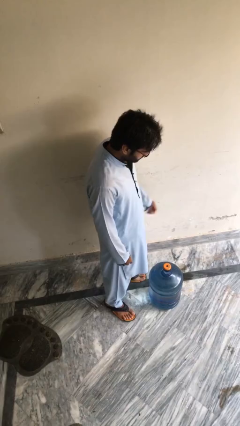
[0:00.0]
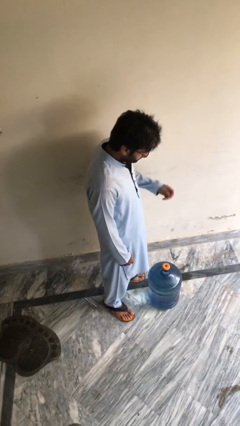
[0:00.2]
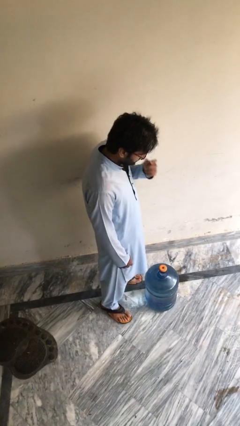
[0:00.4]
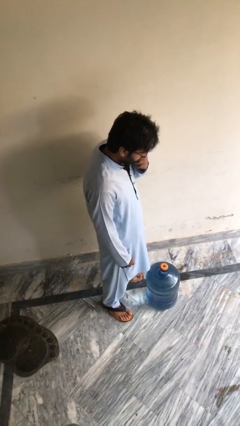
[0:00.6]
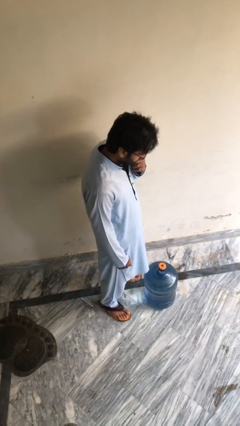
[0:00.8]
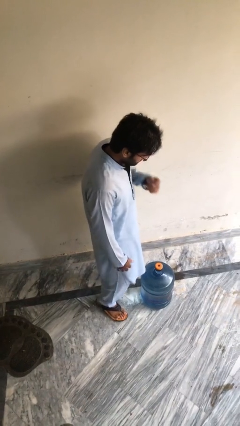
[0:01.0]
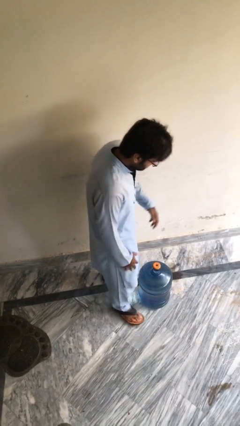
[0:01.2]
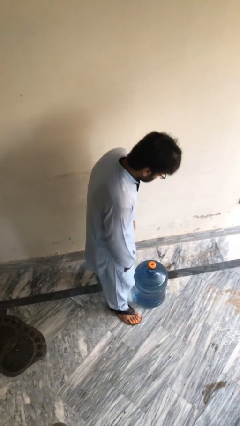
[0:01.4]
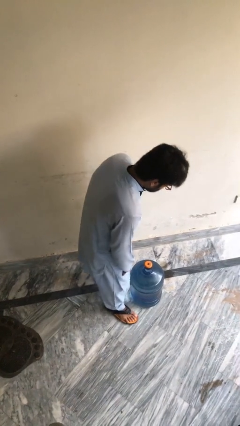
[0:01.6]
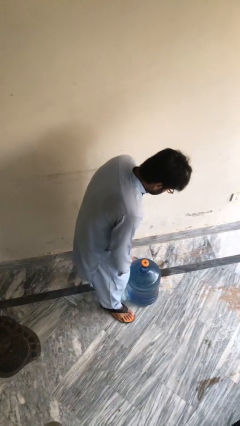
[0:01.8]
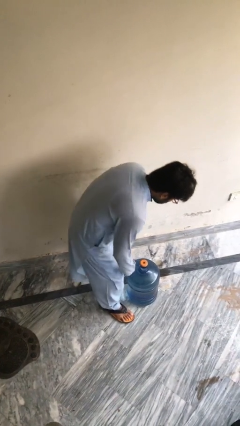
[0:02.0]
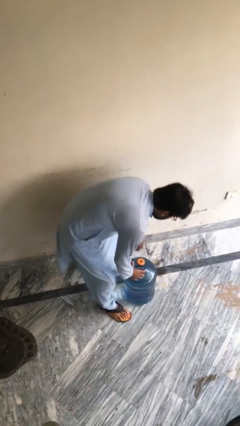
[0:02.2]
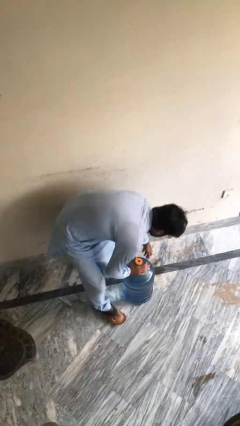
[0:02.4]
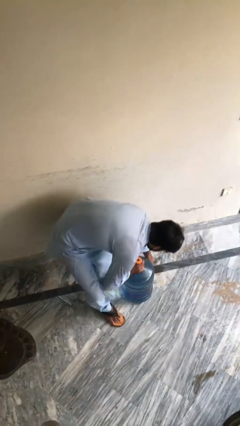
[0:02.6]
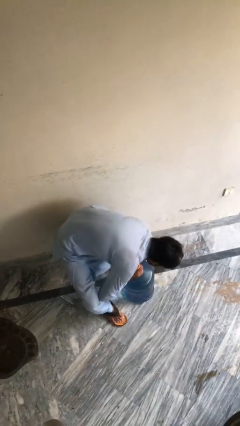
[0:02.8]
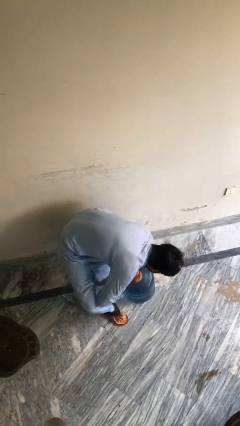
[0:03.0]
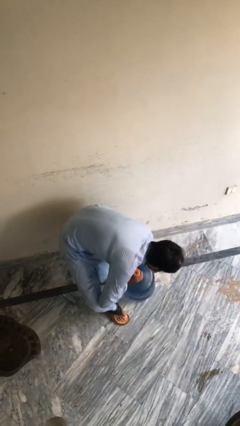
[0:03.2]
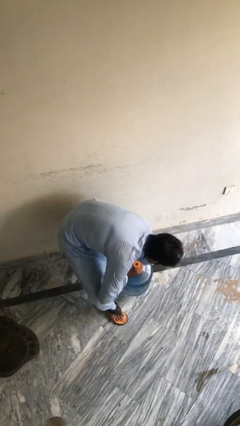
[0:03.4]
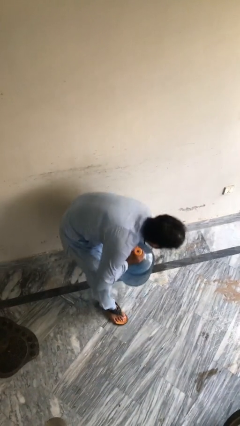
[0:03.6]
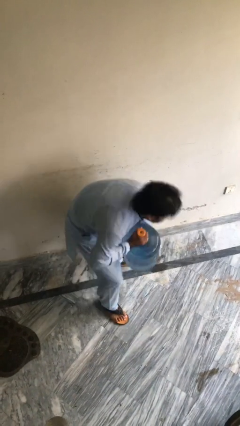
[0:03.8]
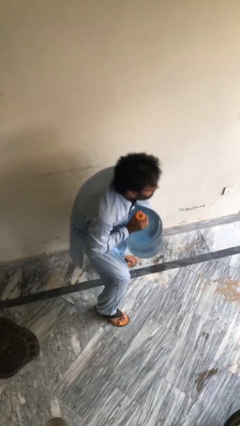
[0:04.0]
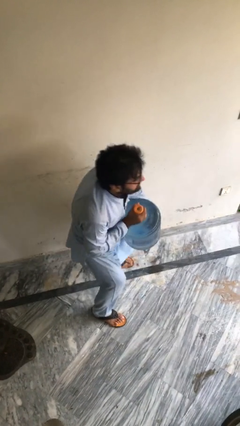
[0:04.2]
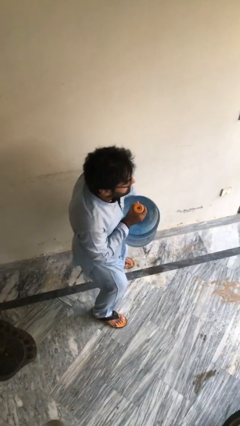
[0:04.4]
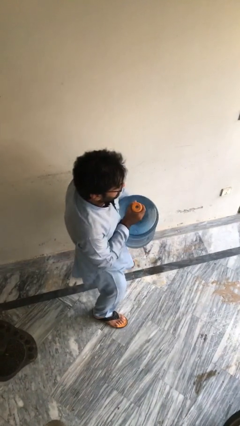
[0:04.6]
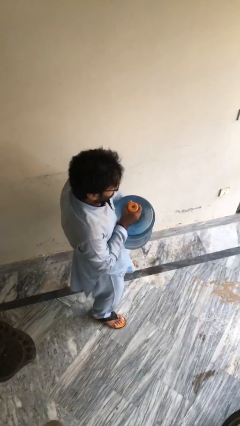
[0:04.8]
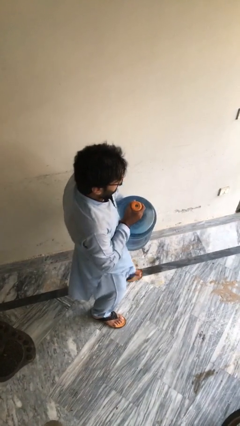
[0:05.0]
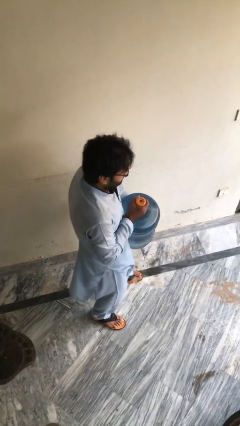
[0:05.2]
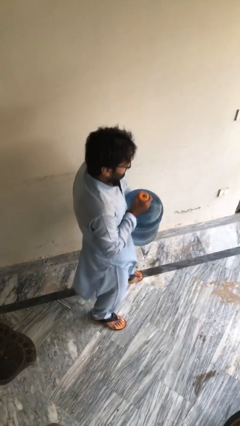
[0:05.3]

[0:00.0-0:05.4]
person picks up object from floor

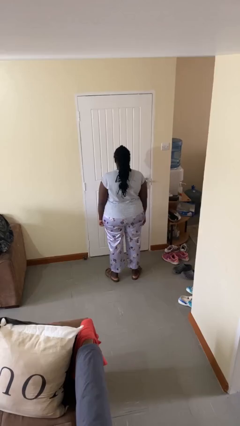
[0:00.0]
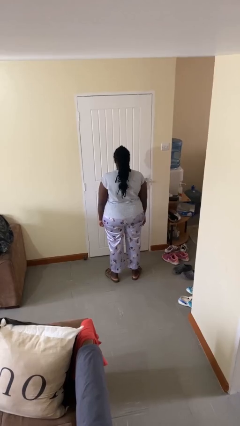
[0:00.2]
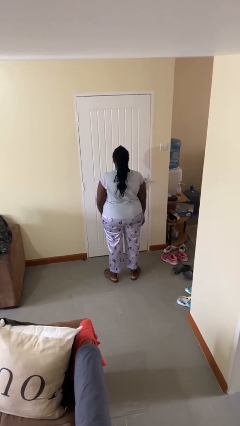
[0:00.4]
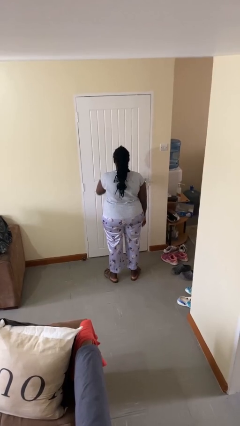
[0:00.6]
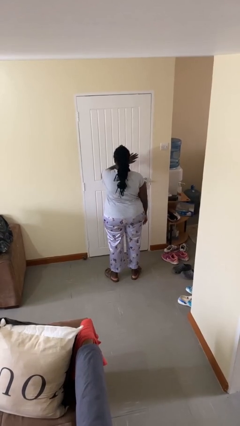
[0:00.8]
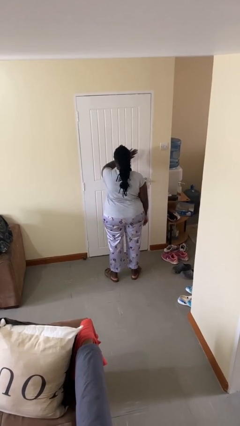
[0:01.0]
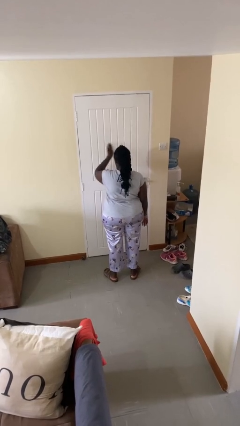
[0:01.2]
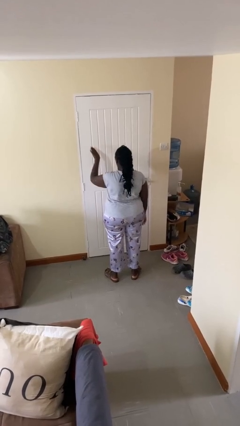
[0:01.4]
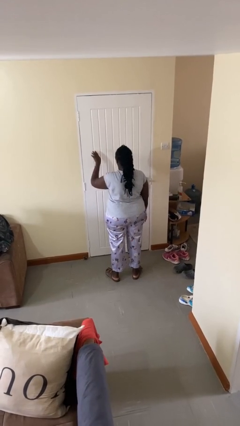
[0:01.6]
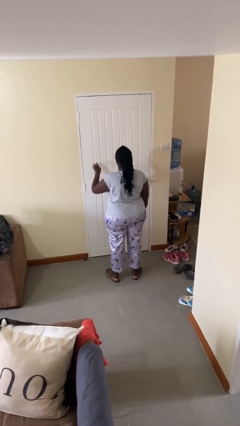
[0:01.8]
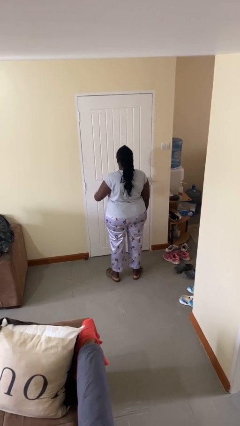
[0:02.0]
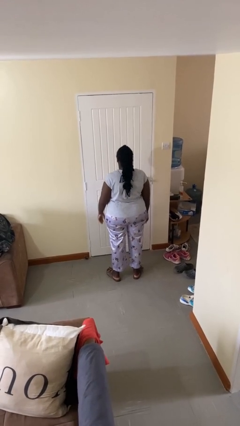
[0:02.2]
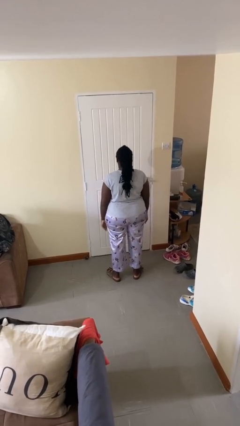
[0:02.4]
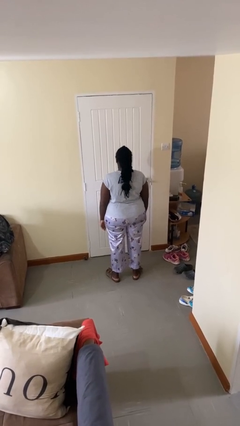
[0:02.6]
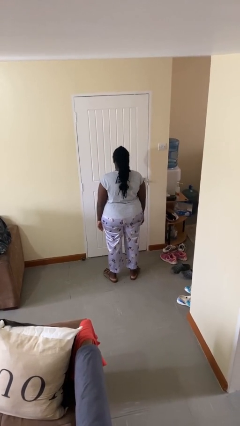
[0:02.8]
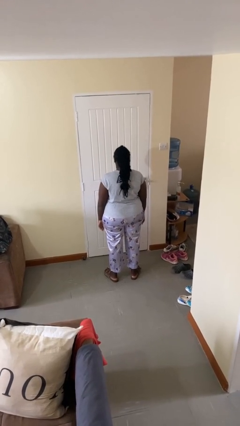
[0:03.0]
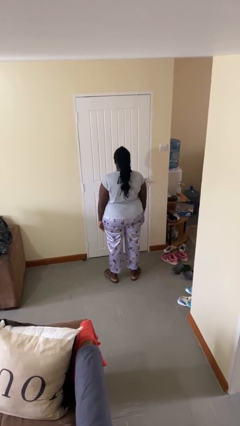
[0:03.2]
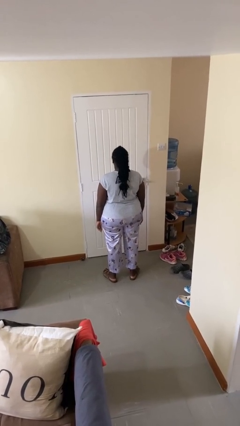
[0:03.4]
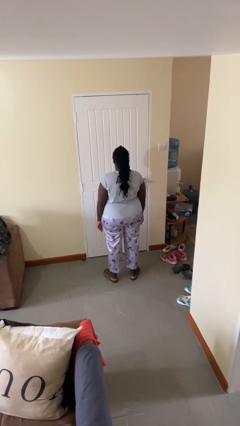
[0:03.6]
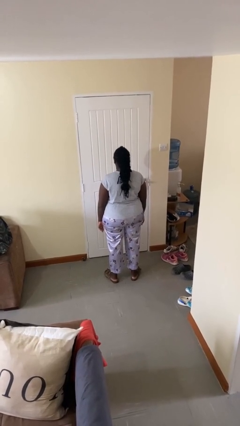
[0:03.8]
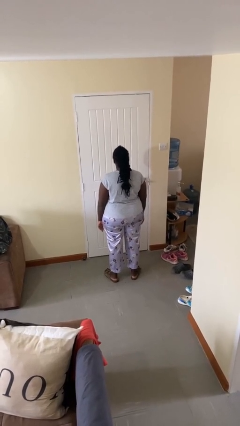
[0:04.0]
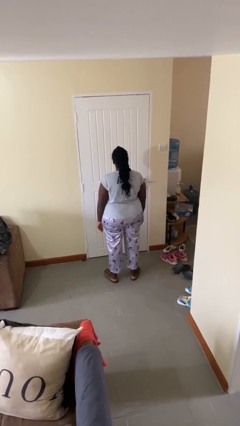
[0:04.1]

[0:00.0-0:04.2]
person gestures swipe left

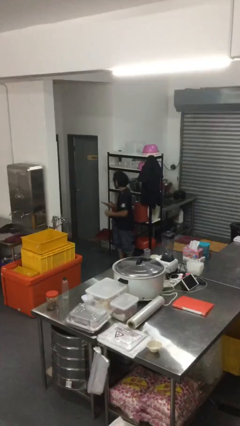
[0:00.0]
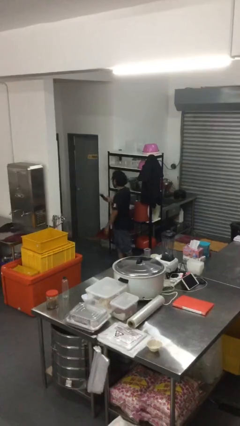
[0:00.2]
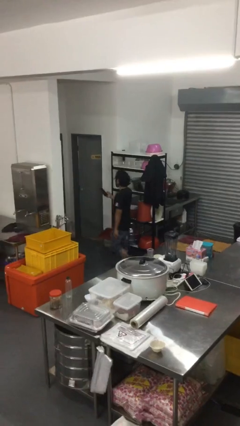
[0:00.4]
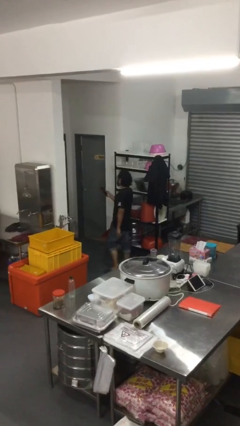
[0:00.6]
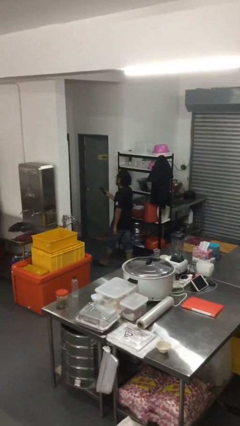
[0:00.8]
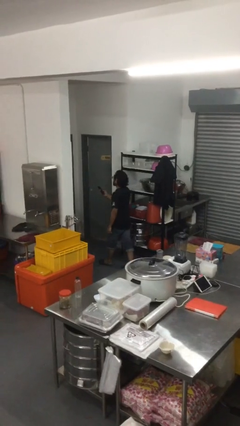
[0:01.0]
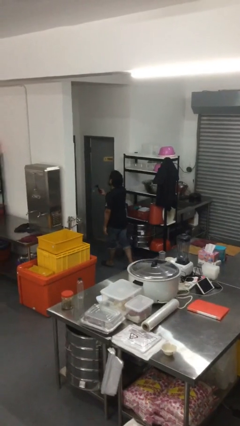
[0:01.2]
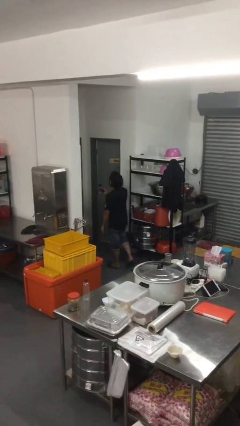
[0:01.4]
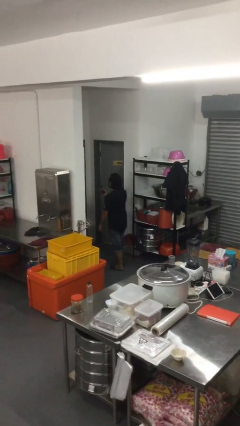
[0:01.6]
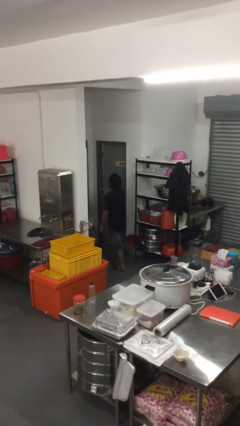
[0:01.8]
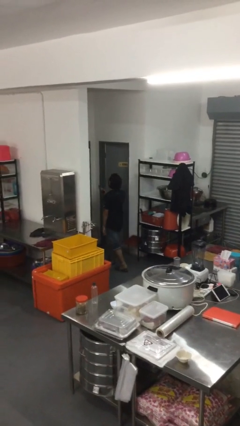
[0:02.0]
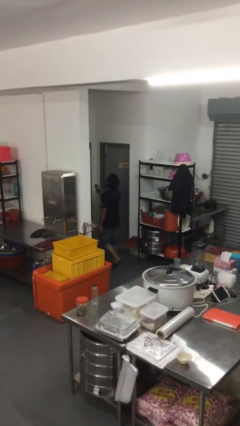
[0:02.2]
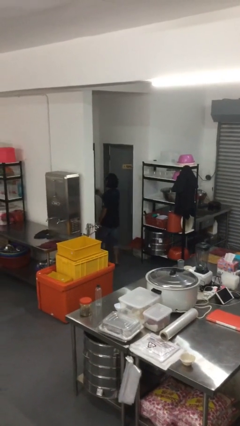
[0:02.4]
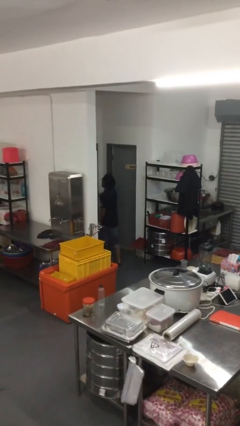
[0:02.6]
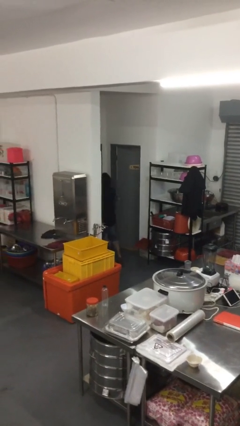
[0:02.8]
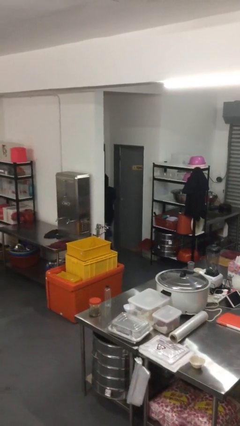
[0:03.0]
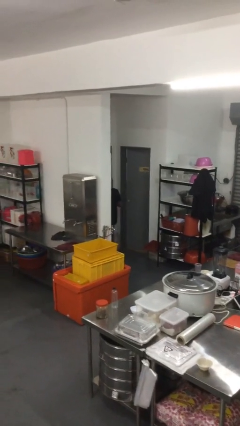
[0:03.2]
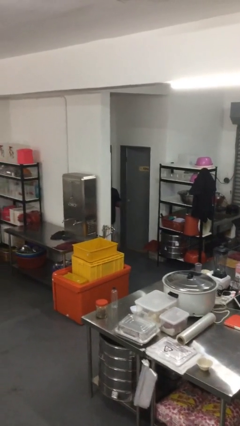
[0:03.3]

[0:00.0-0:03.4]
person exits scene through structure

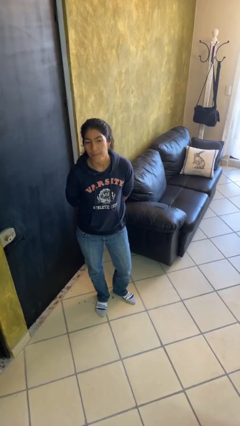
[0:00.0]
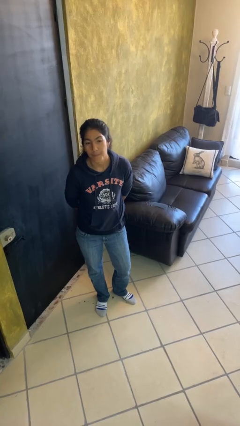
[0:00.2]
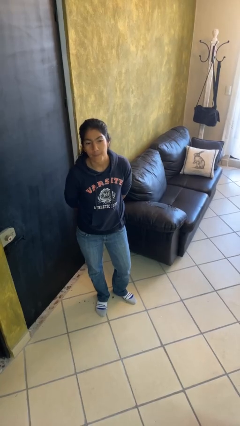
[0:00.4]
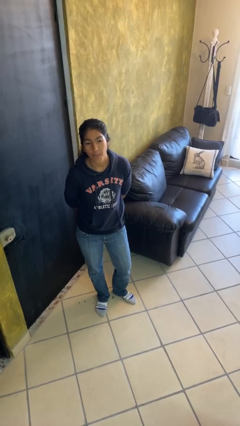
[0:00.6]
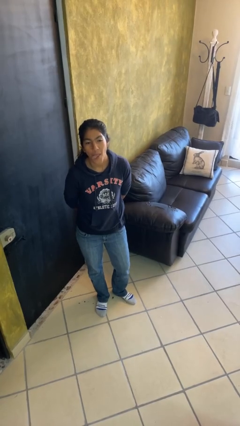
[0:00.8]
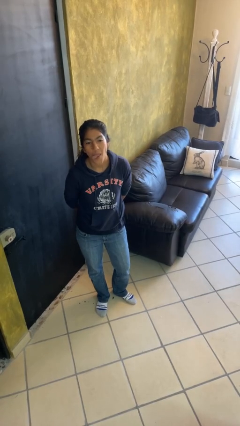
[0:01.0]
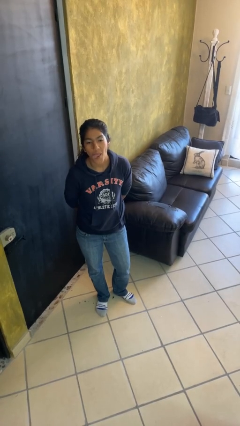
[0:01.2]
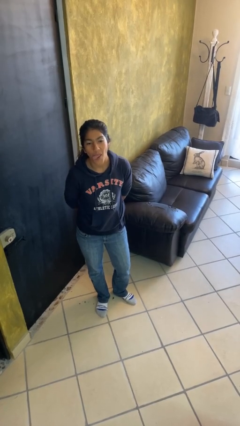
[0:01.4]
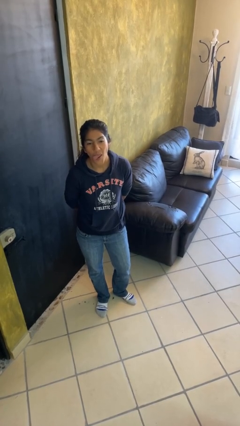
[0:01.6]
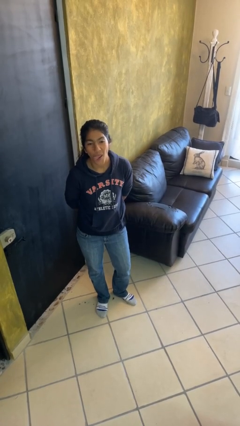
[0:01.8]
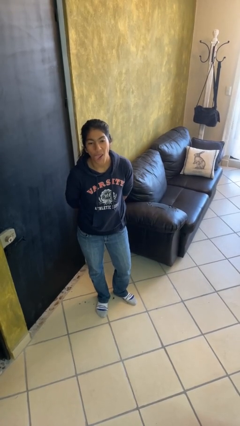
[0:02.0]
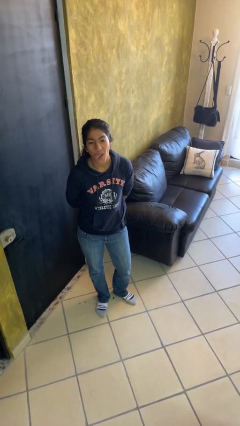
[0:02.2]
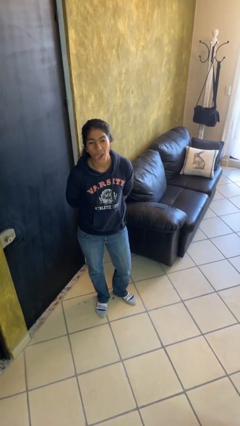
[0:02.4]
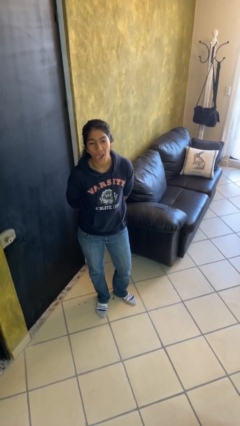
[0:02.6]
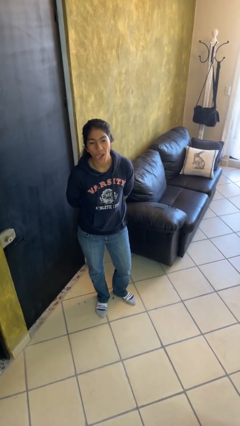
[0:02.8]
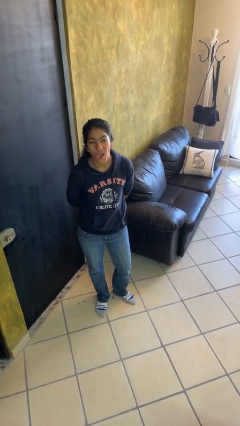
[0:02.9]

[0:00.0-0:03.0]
person sticks out tongue

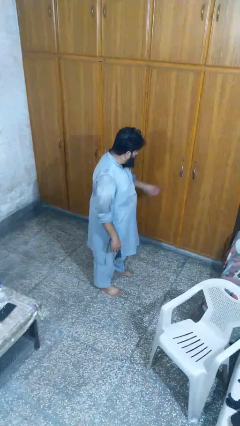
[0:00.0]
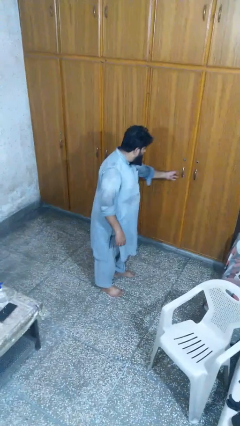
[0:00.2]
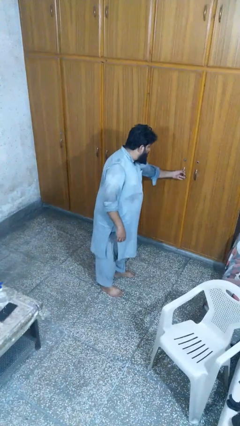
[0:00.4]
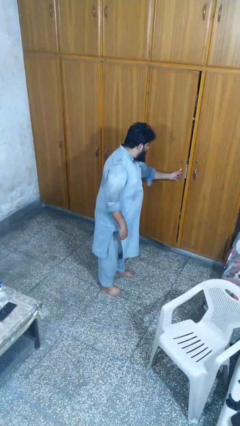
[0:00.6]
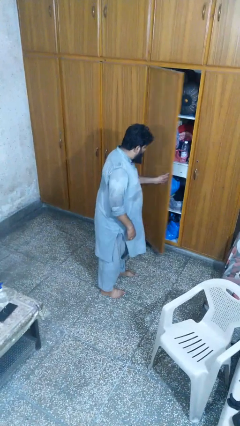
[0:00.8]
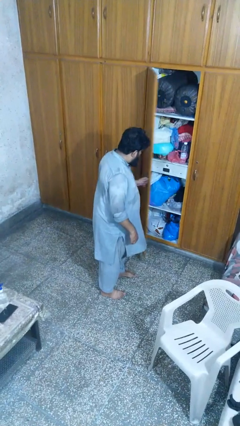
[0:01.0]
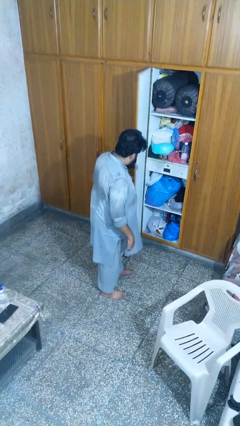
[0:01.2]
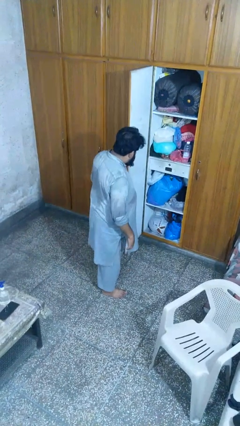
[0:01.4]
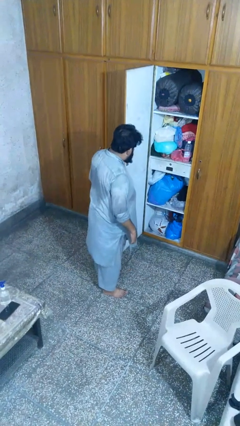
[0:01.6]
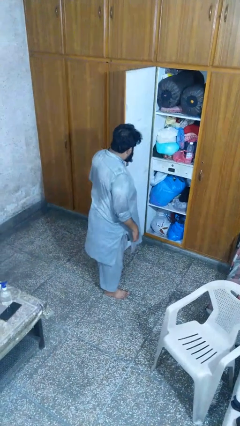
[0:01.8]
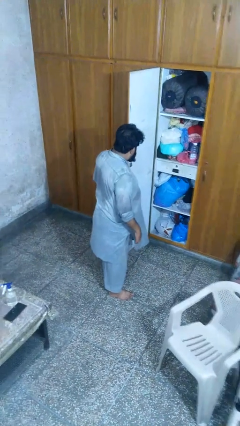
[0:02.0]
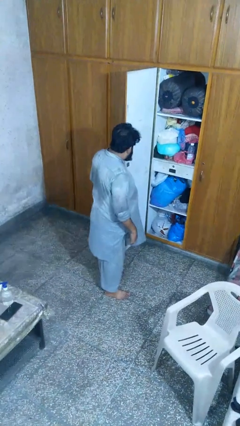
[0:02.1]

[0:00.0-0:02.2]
person opens closet door

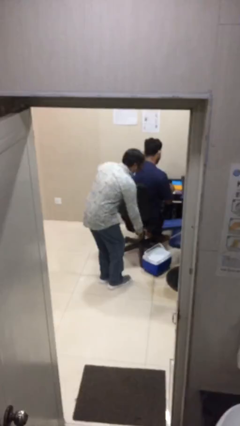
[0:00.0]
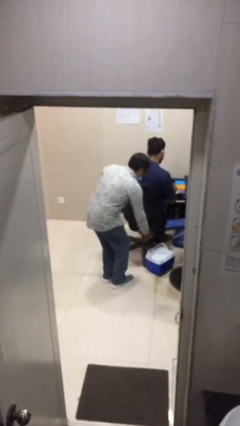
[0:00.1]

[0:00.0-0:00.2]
person steals object from person
